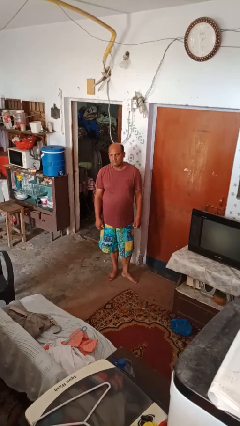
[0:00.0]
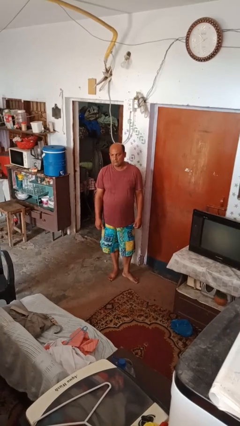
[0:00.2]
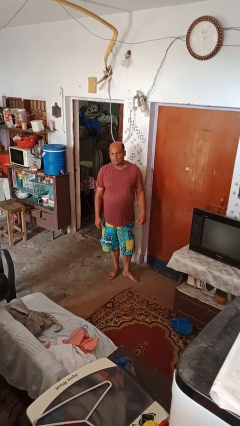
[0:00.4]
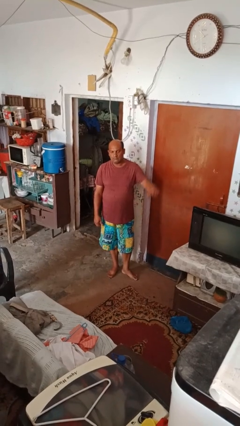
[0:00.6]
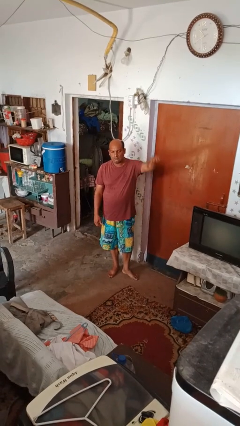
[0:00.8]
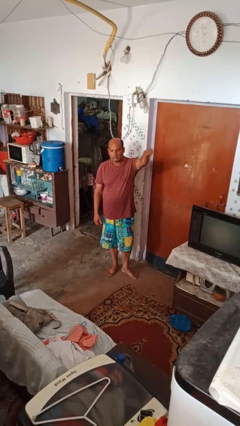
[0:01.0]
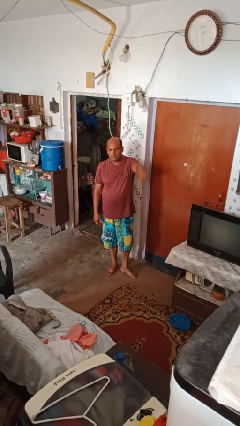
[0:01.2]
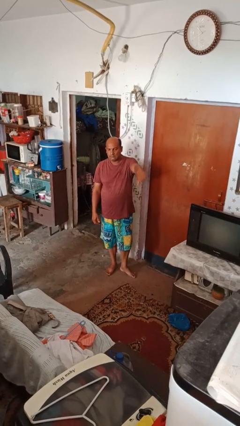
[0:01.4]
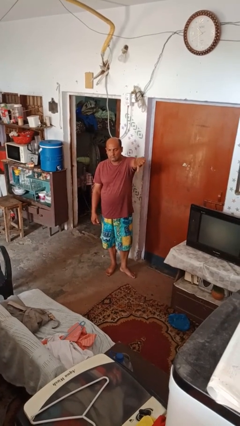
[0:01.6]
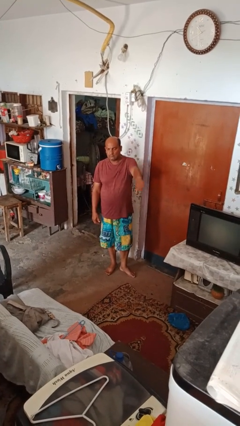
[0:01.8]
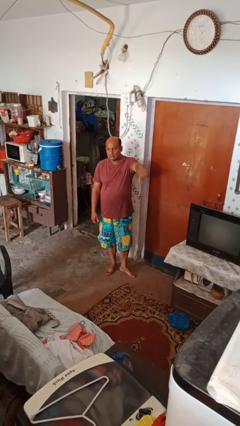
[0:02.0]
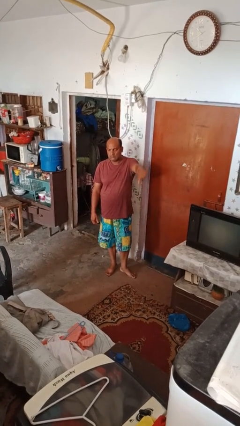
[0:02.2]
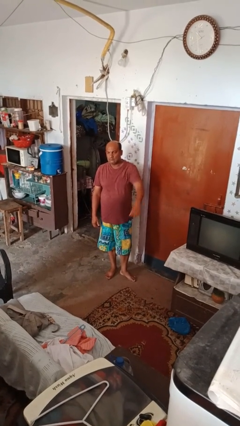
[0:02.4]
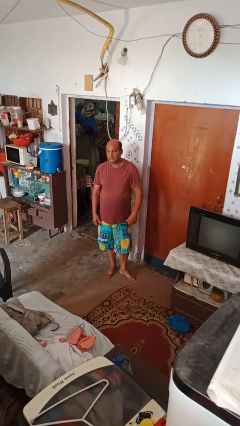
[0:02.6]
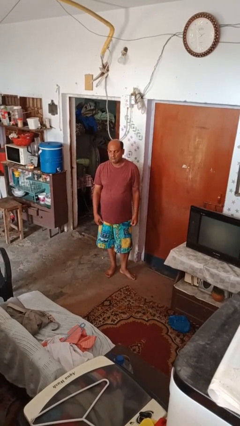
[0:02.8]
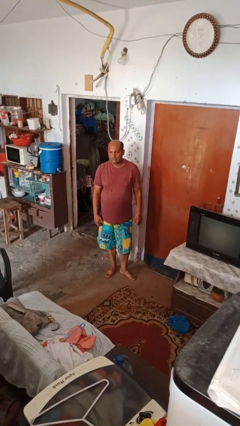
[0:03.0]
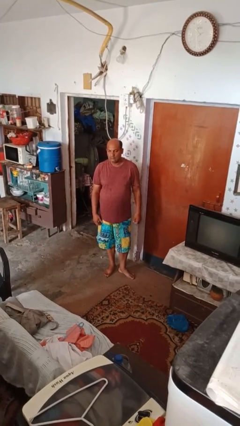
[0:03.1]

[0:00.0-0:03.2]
person gestures thumbs down

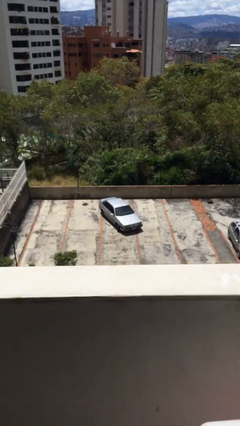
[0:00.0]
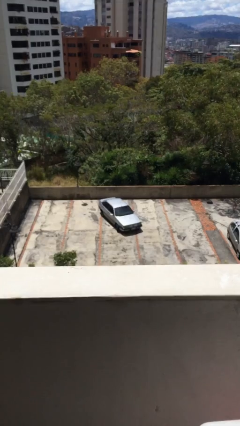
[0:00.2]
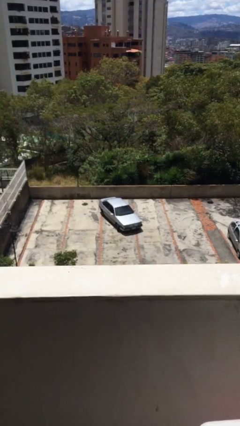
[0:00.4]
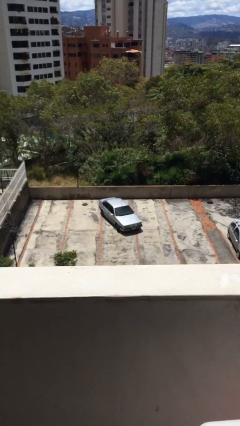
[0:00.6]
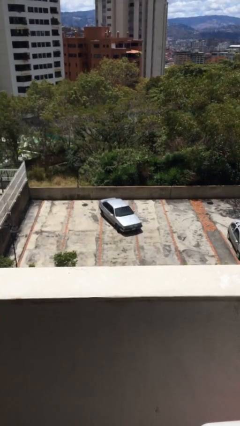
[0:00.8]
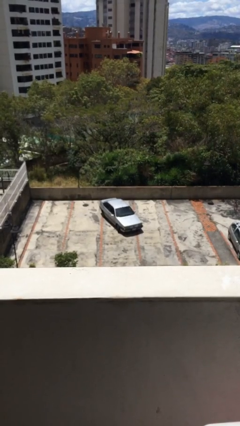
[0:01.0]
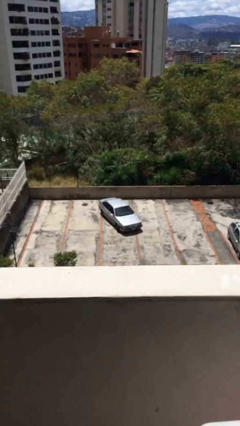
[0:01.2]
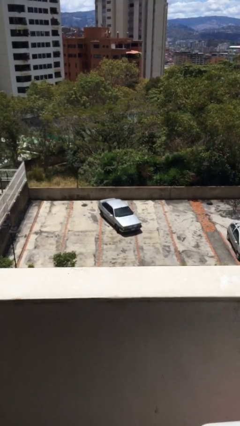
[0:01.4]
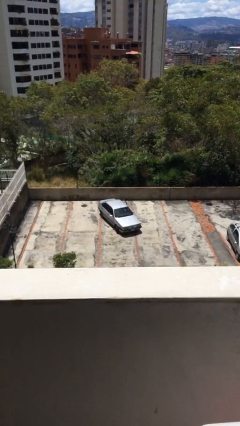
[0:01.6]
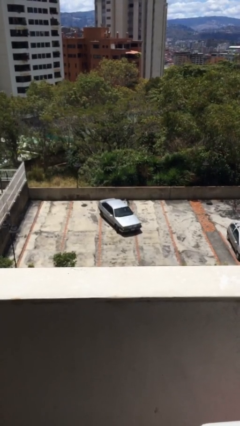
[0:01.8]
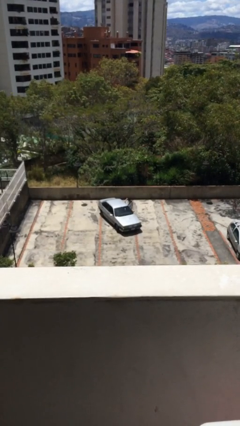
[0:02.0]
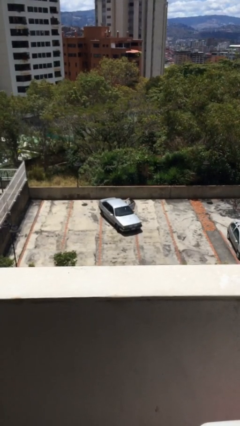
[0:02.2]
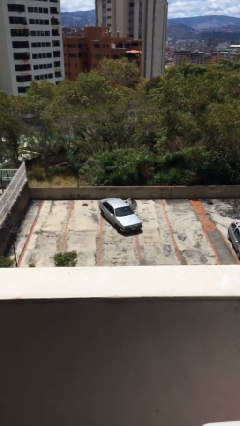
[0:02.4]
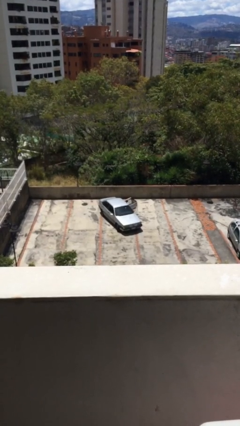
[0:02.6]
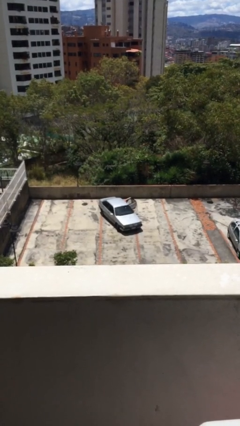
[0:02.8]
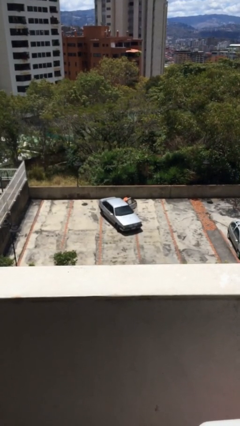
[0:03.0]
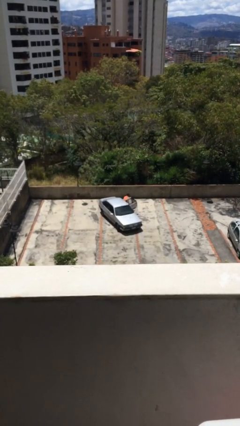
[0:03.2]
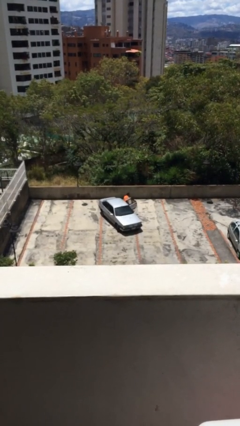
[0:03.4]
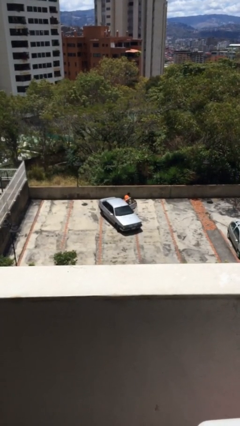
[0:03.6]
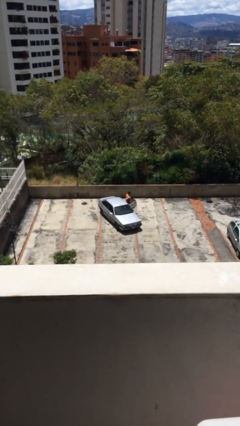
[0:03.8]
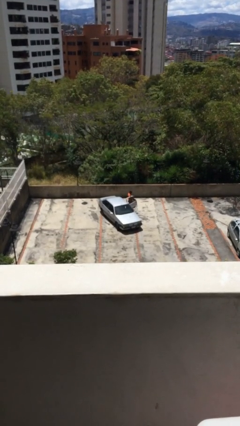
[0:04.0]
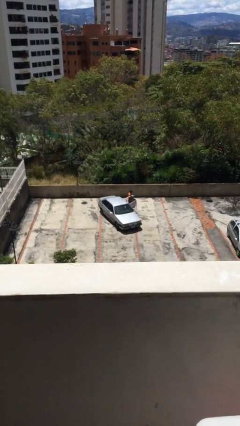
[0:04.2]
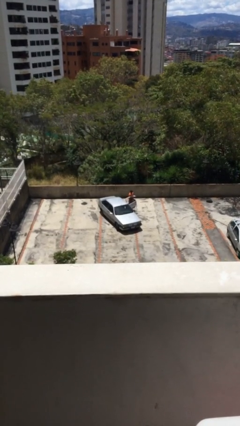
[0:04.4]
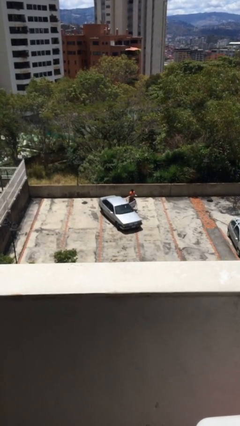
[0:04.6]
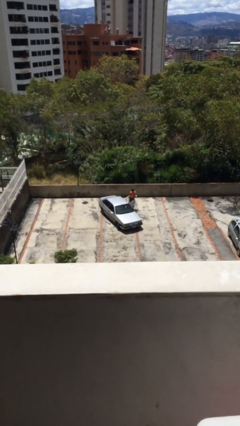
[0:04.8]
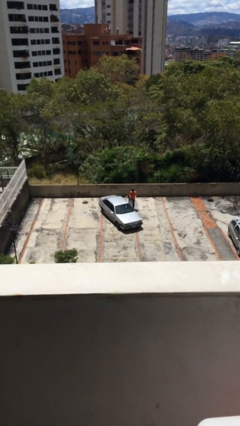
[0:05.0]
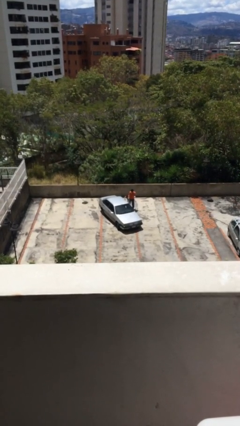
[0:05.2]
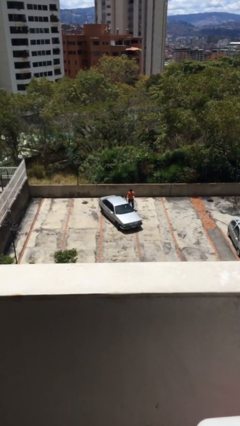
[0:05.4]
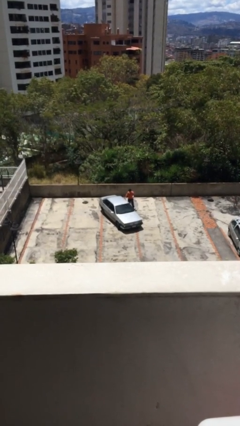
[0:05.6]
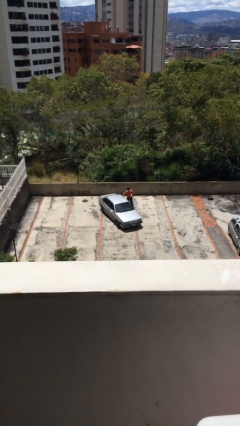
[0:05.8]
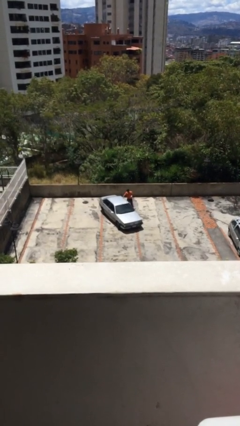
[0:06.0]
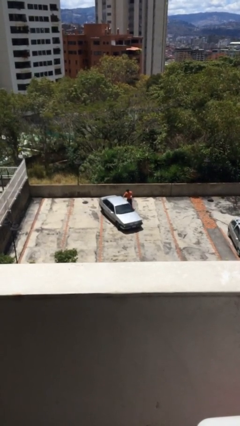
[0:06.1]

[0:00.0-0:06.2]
car drops off person

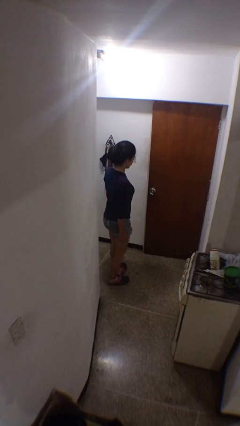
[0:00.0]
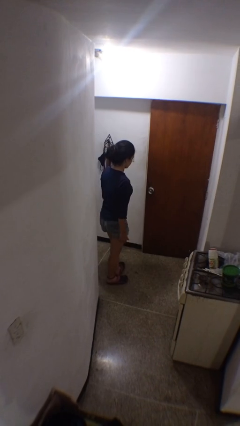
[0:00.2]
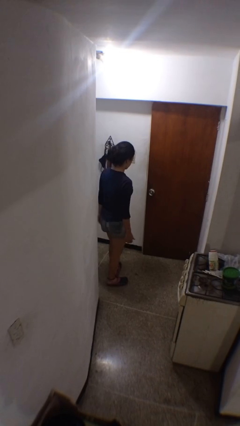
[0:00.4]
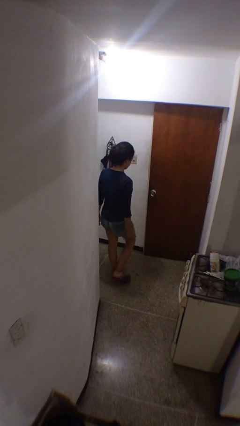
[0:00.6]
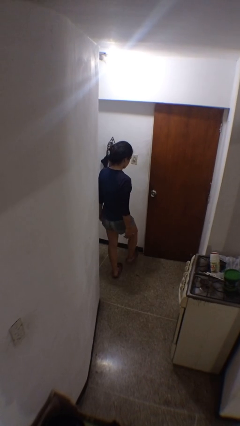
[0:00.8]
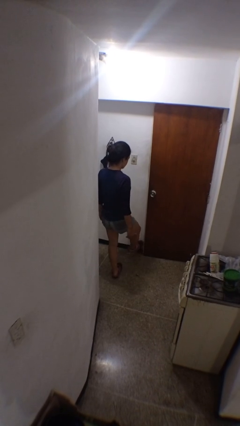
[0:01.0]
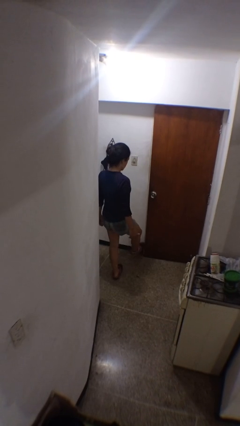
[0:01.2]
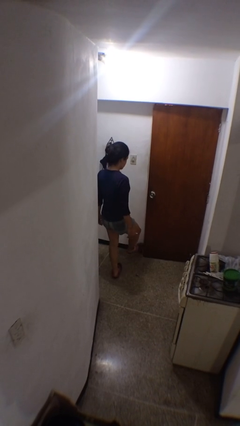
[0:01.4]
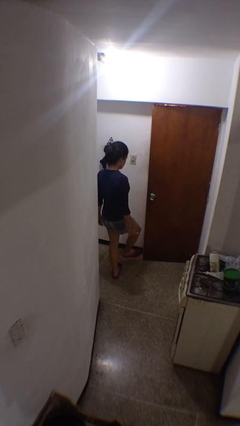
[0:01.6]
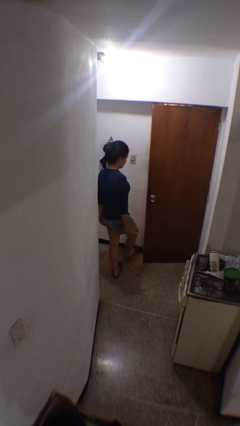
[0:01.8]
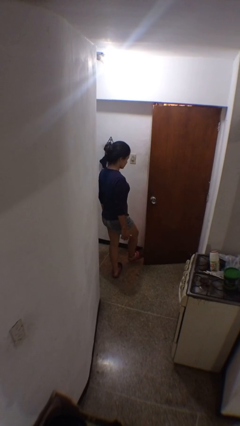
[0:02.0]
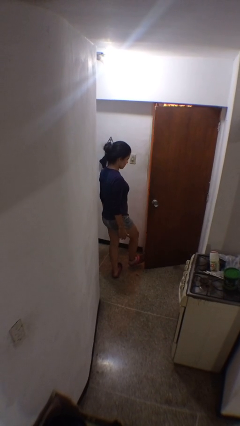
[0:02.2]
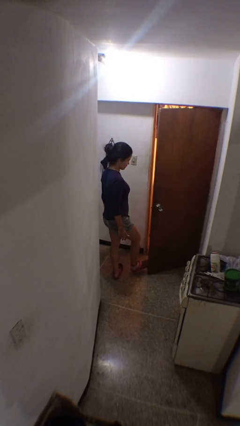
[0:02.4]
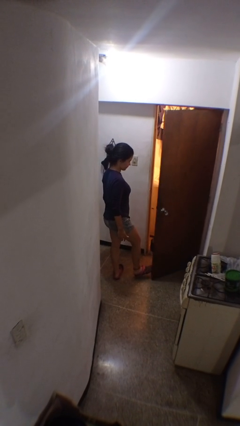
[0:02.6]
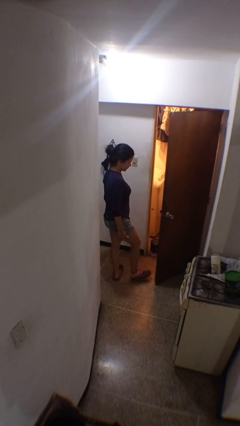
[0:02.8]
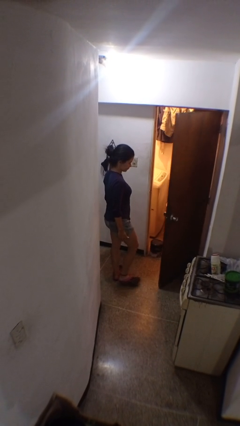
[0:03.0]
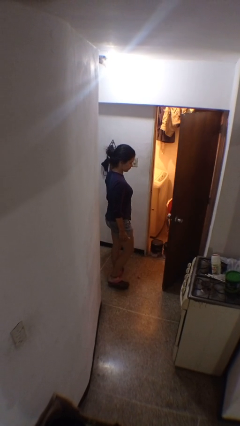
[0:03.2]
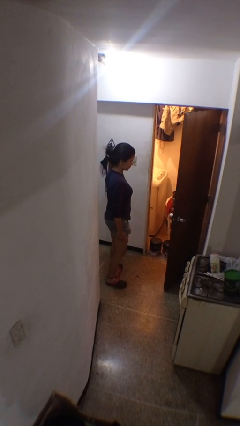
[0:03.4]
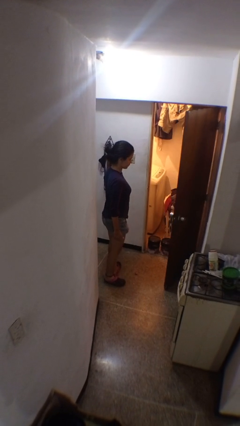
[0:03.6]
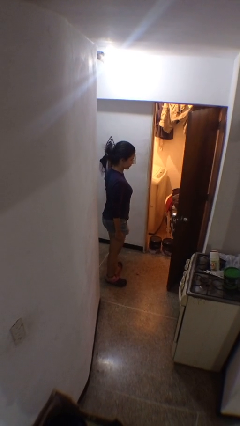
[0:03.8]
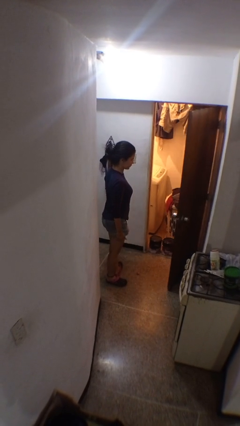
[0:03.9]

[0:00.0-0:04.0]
person opens facility door

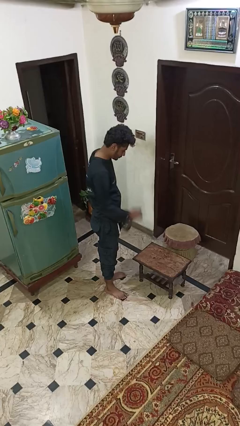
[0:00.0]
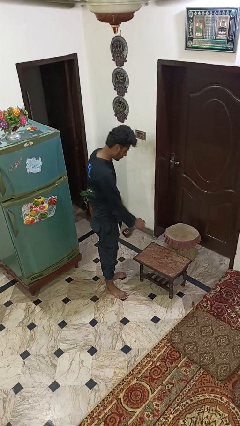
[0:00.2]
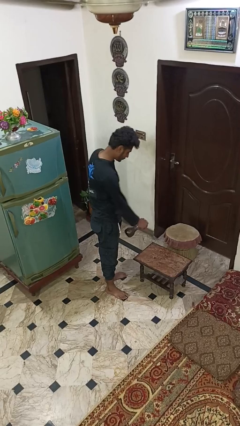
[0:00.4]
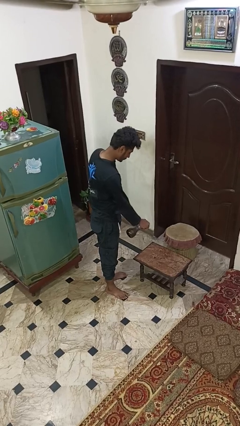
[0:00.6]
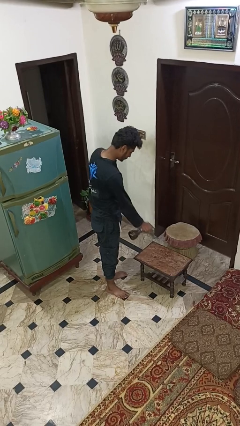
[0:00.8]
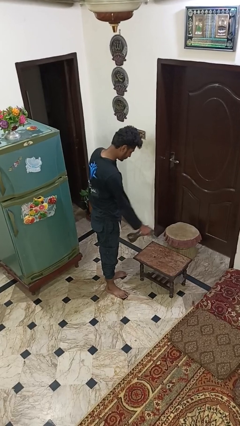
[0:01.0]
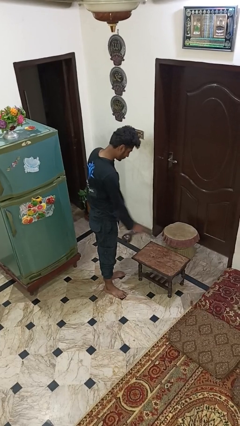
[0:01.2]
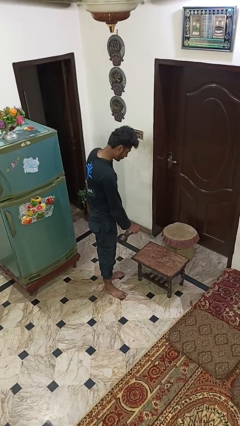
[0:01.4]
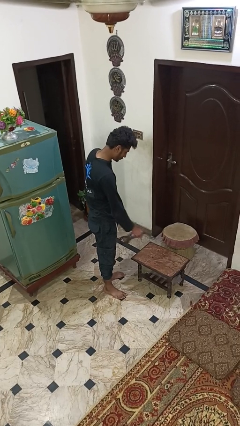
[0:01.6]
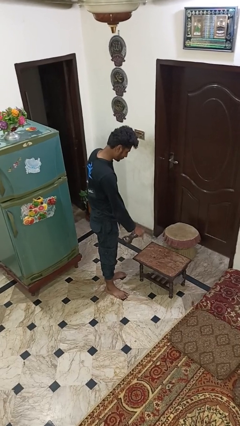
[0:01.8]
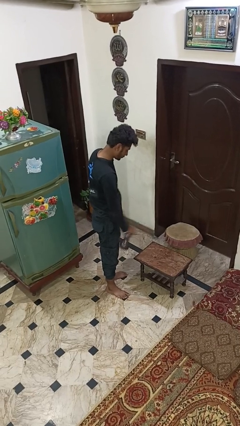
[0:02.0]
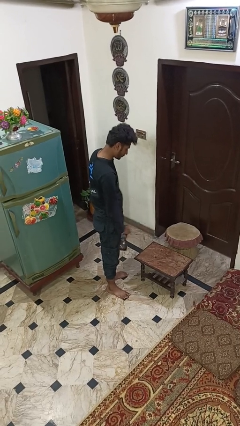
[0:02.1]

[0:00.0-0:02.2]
person sprays from bottle

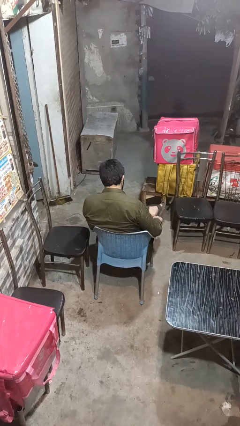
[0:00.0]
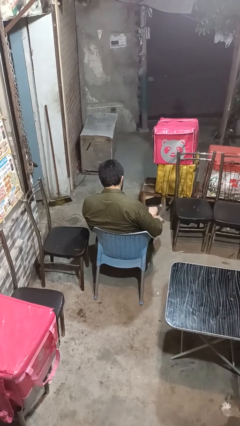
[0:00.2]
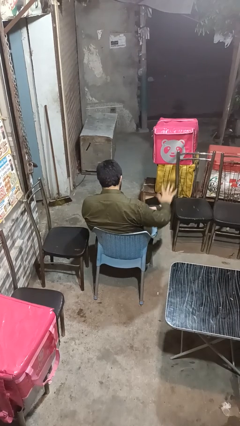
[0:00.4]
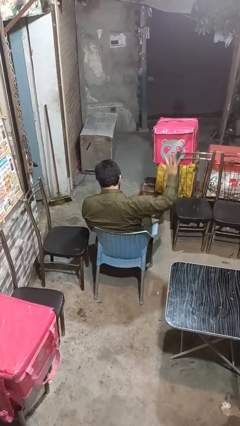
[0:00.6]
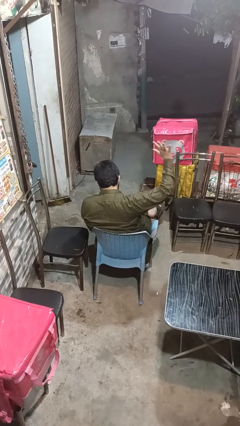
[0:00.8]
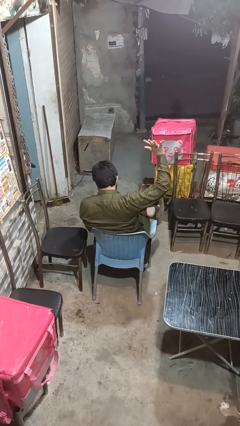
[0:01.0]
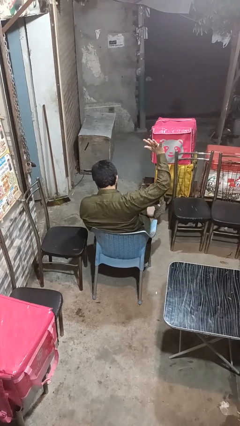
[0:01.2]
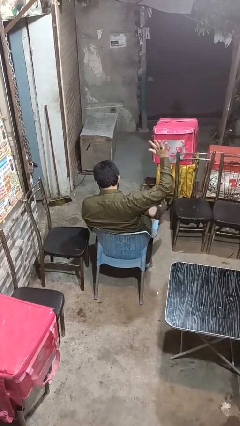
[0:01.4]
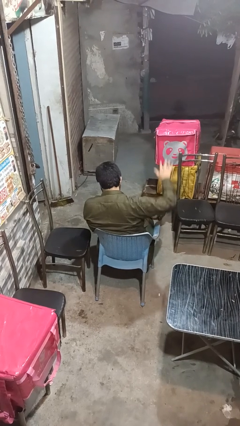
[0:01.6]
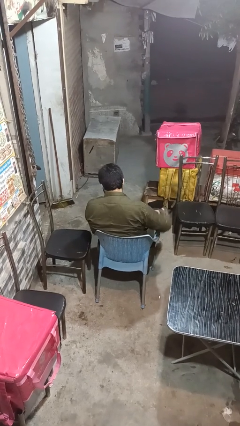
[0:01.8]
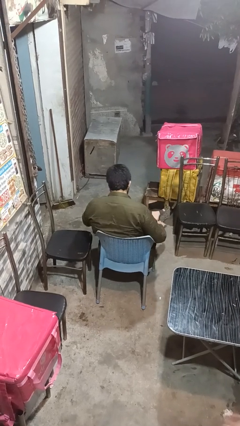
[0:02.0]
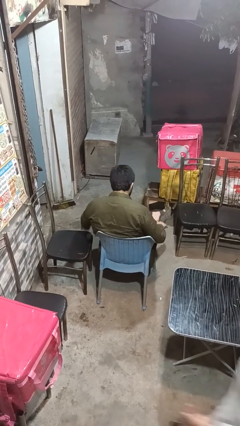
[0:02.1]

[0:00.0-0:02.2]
person gestures number five
